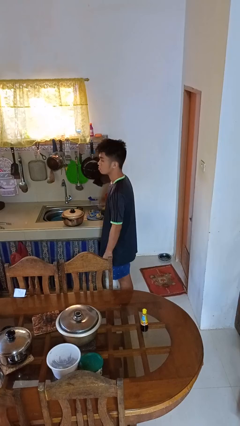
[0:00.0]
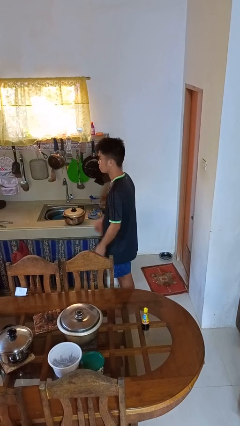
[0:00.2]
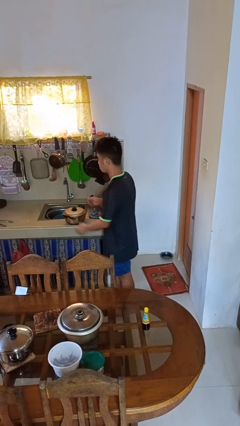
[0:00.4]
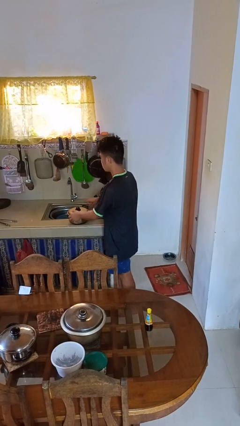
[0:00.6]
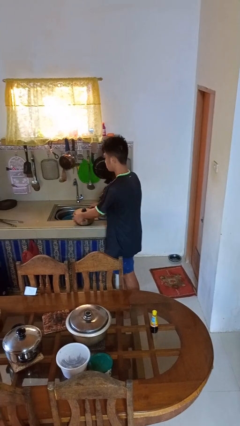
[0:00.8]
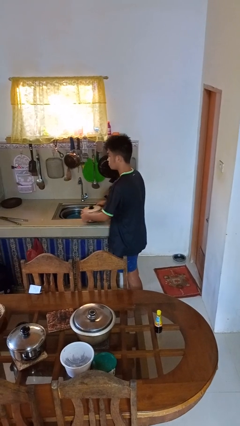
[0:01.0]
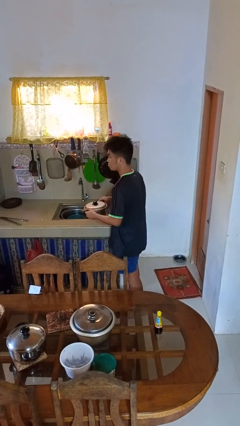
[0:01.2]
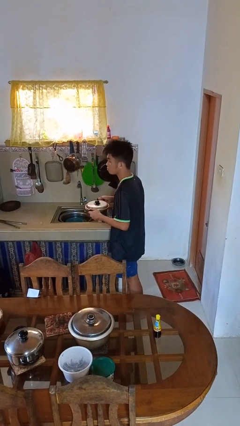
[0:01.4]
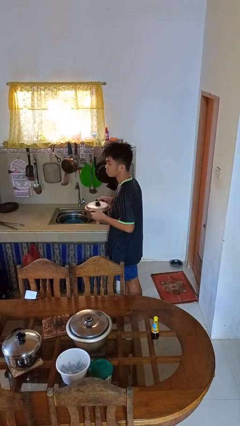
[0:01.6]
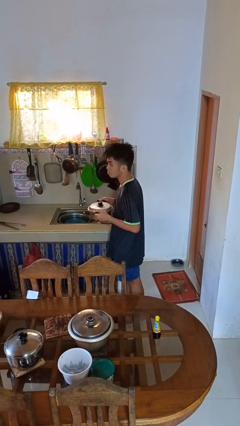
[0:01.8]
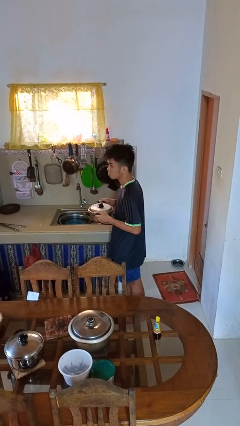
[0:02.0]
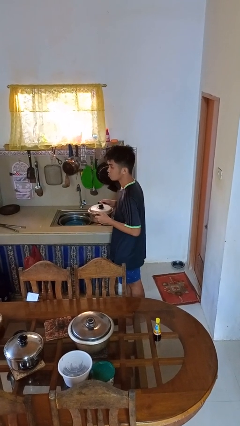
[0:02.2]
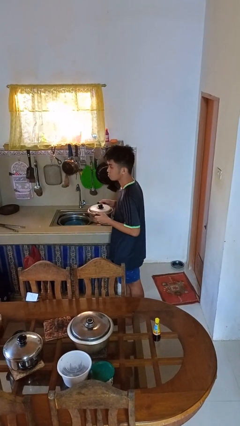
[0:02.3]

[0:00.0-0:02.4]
person picks up object from countertop

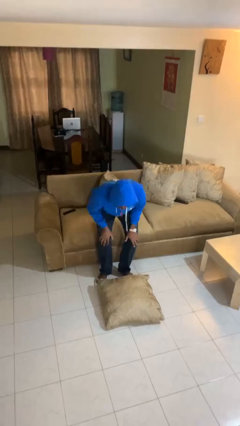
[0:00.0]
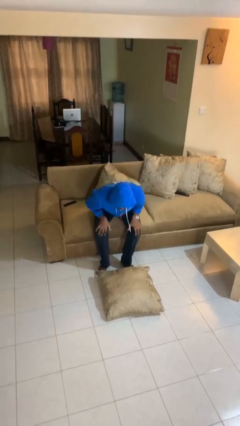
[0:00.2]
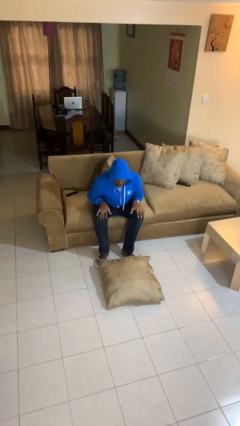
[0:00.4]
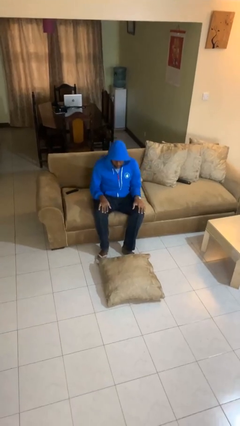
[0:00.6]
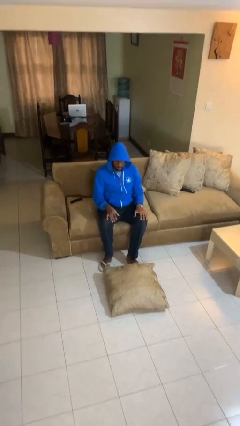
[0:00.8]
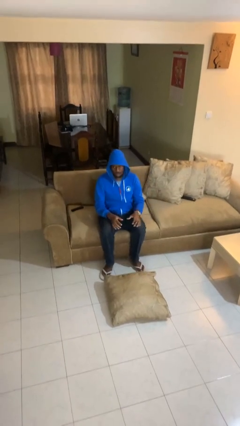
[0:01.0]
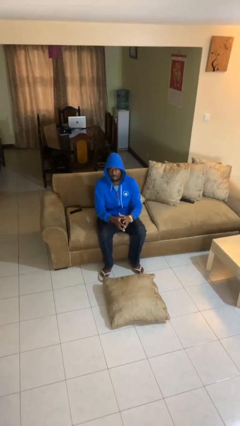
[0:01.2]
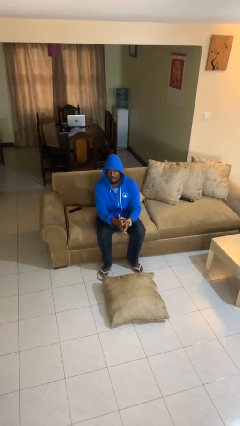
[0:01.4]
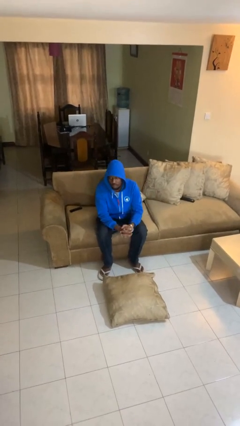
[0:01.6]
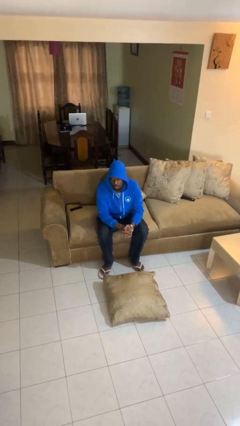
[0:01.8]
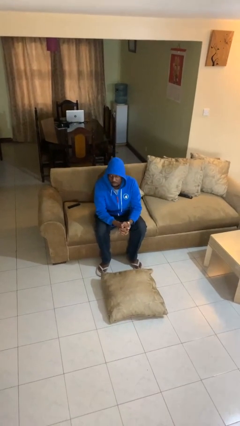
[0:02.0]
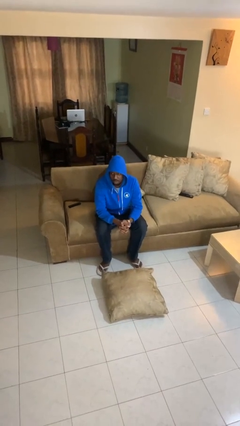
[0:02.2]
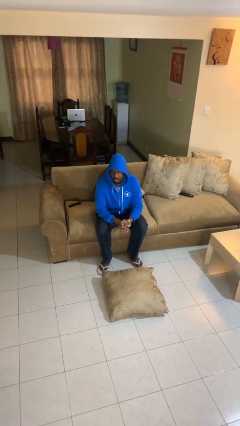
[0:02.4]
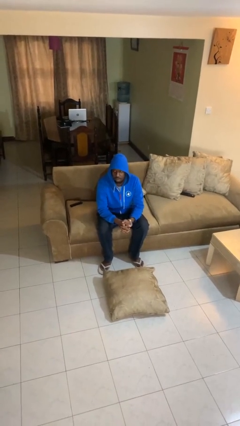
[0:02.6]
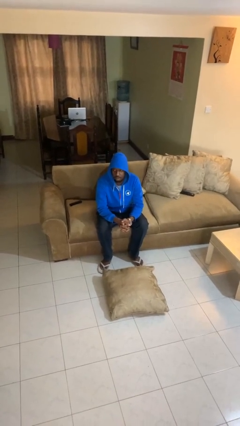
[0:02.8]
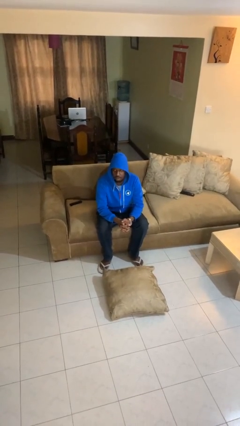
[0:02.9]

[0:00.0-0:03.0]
person sits down

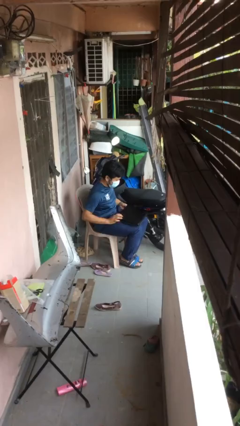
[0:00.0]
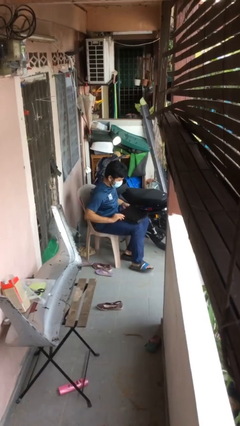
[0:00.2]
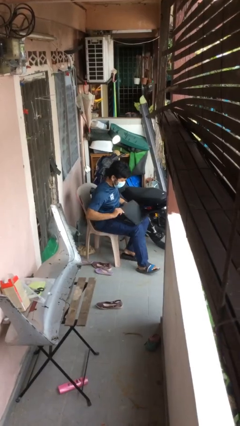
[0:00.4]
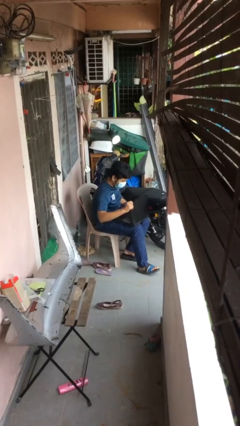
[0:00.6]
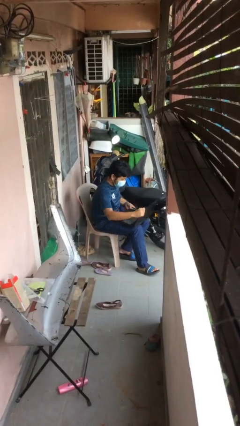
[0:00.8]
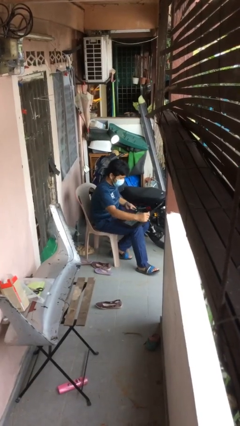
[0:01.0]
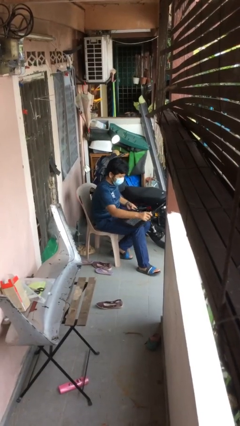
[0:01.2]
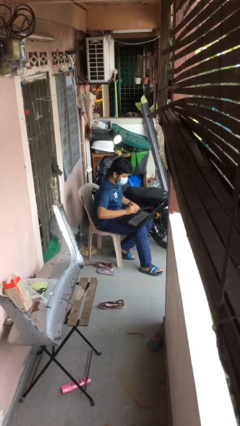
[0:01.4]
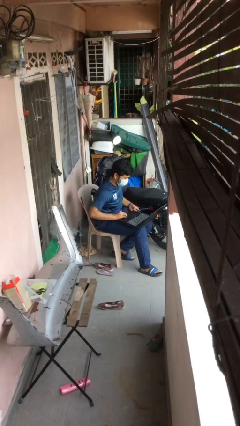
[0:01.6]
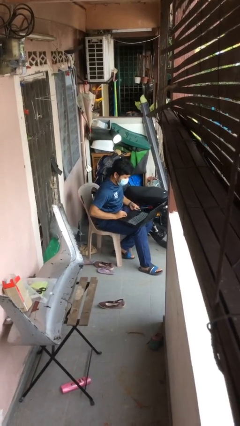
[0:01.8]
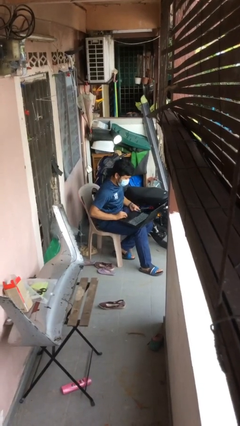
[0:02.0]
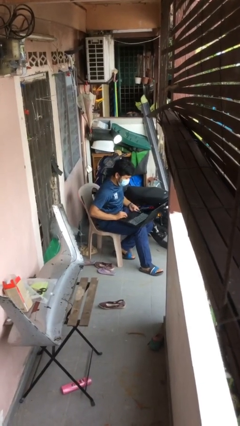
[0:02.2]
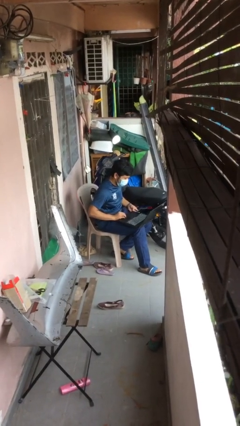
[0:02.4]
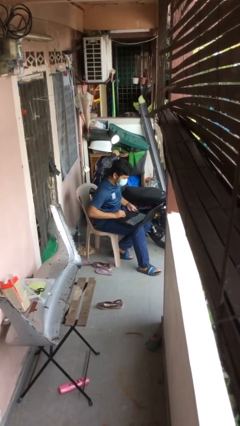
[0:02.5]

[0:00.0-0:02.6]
person opens laptop

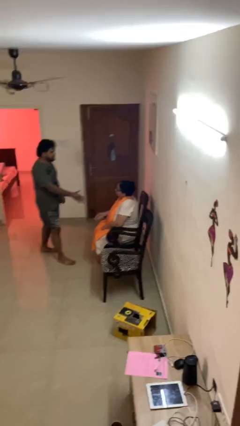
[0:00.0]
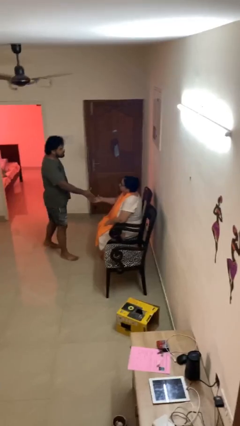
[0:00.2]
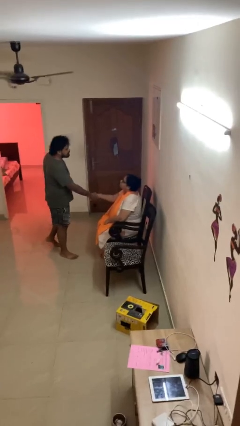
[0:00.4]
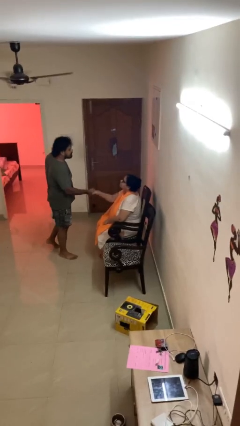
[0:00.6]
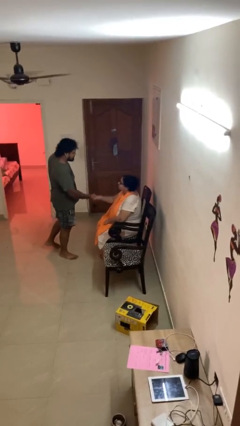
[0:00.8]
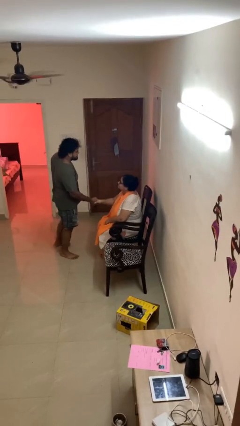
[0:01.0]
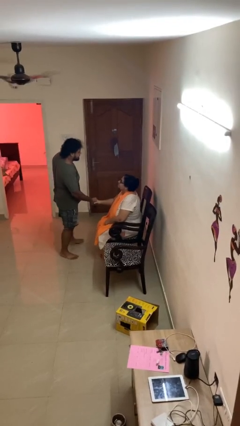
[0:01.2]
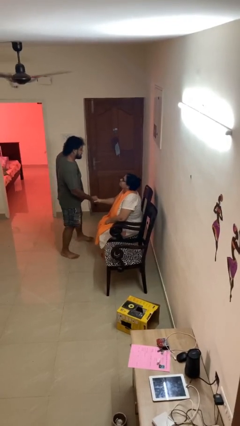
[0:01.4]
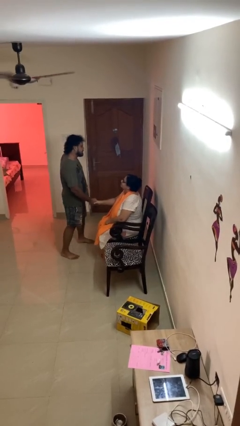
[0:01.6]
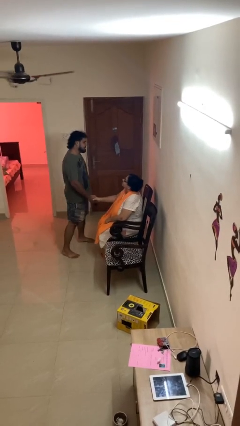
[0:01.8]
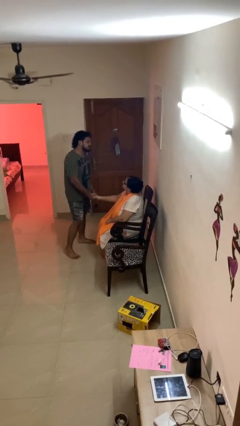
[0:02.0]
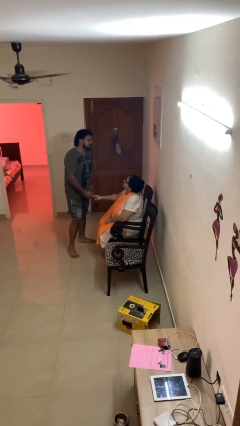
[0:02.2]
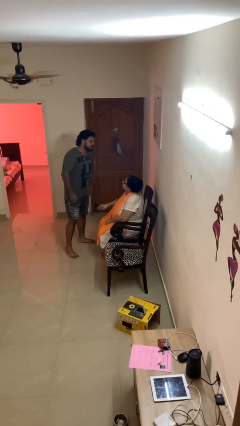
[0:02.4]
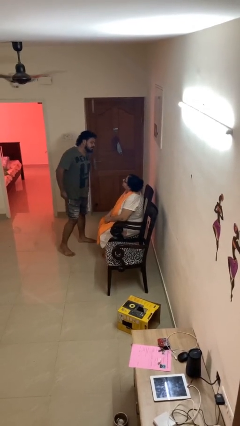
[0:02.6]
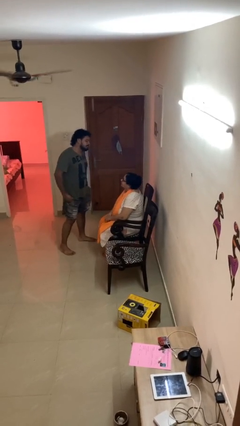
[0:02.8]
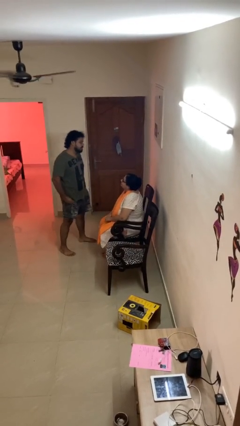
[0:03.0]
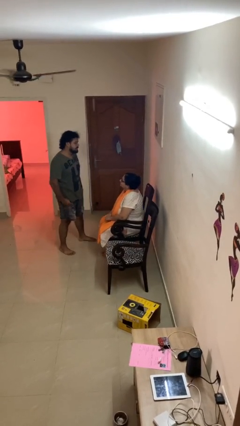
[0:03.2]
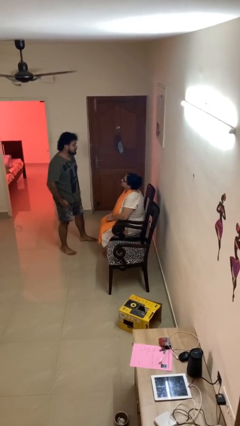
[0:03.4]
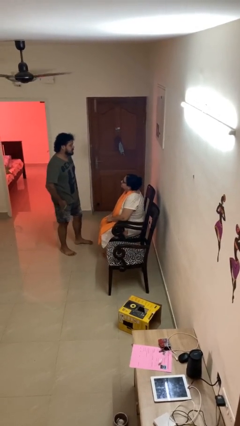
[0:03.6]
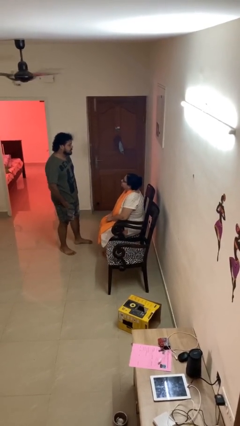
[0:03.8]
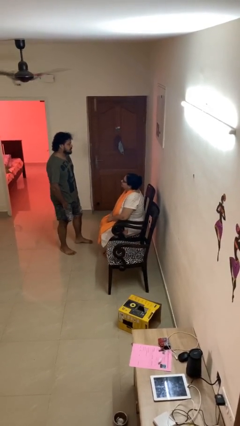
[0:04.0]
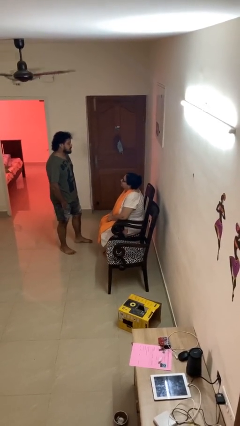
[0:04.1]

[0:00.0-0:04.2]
person shakes hand

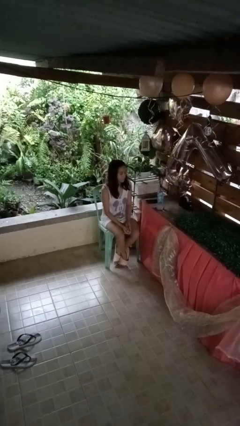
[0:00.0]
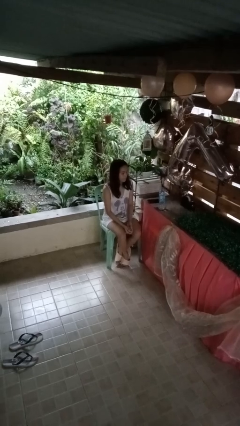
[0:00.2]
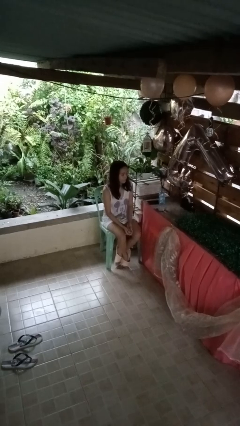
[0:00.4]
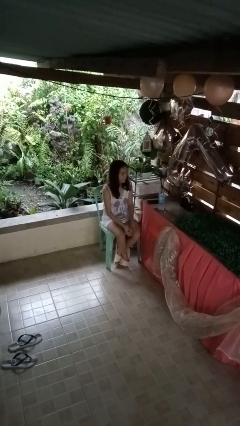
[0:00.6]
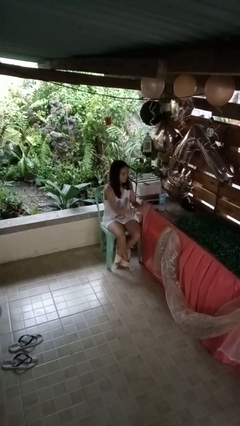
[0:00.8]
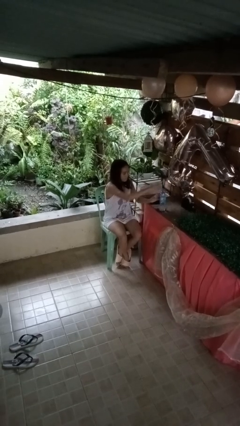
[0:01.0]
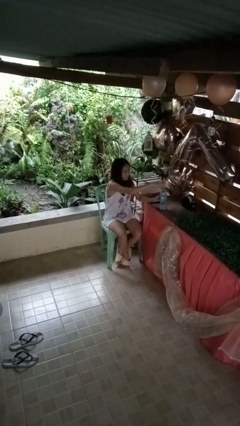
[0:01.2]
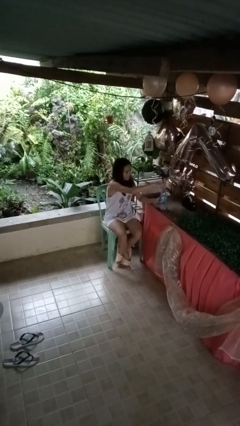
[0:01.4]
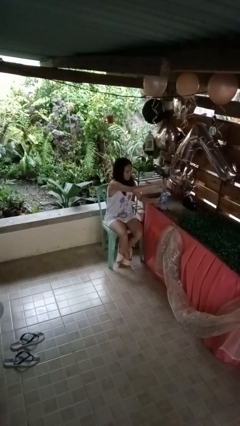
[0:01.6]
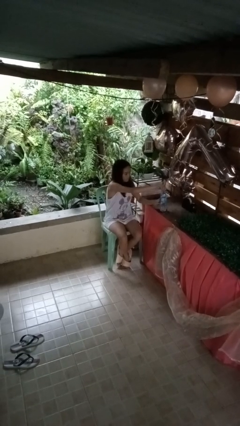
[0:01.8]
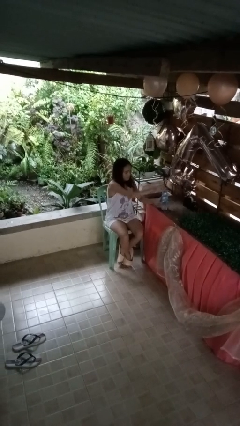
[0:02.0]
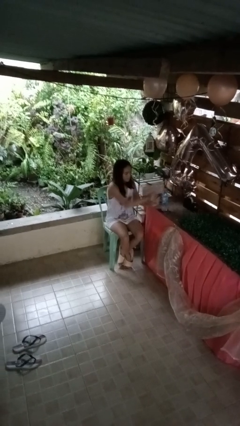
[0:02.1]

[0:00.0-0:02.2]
person screws lid to bottle

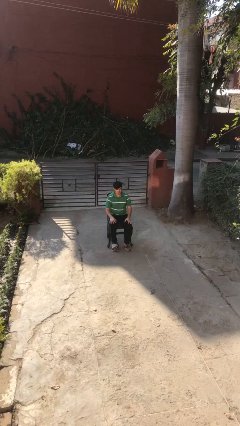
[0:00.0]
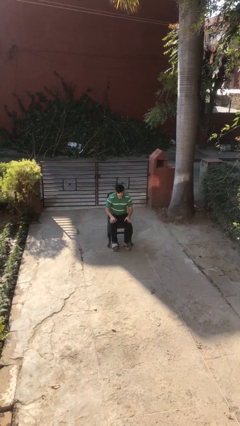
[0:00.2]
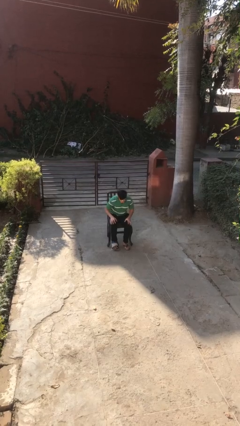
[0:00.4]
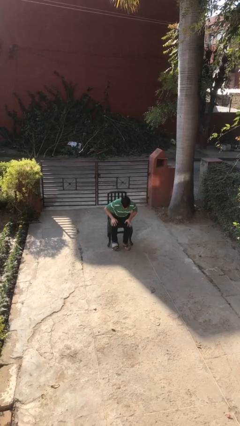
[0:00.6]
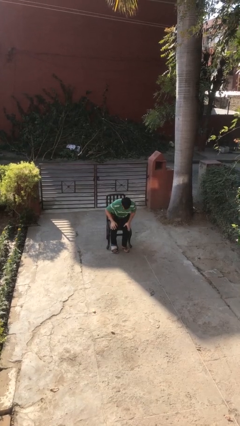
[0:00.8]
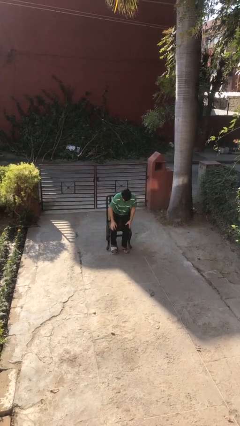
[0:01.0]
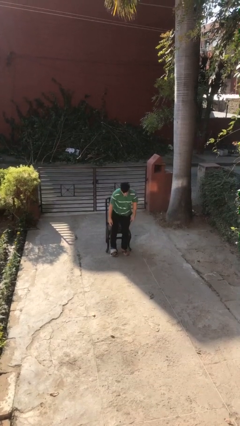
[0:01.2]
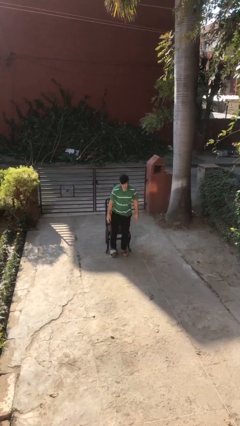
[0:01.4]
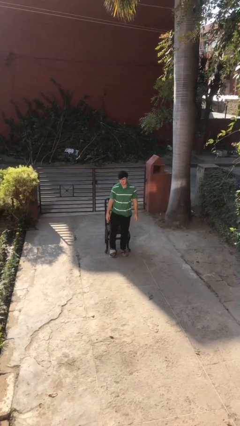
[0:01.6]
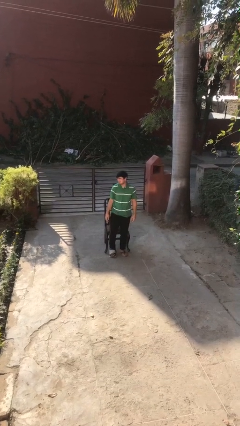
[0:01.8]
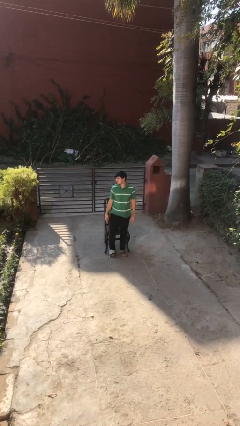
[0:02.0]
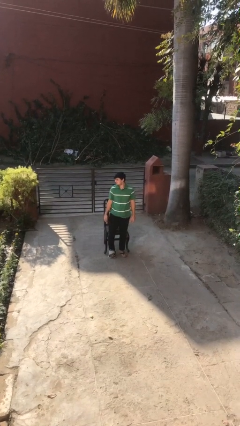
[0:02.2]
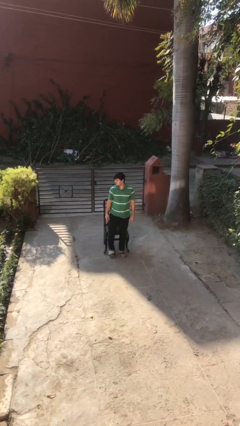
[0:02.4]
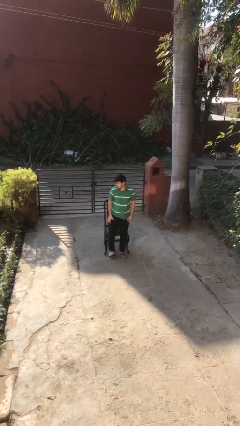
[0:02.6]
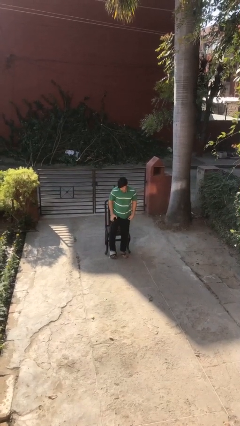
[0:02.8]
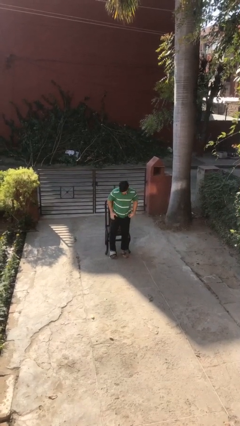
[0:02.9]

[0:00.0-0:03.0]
person stands up
